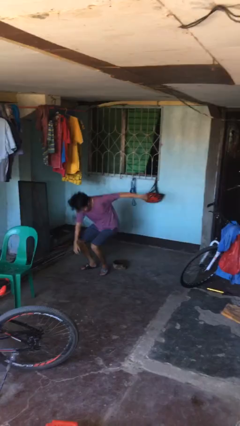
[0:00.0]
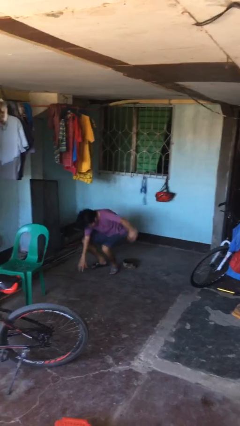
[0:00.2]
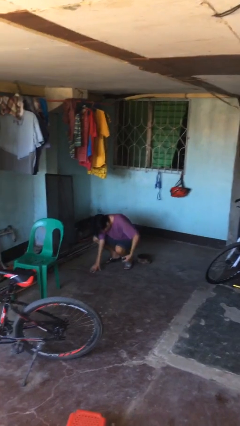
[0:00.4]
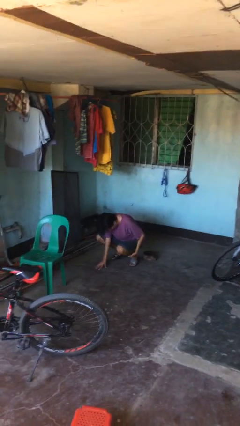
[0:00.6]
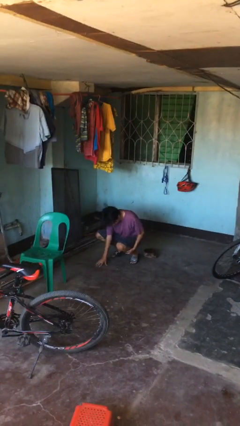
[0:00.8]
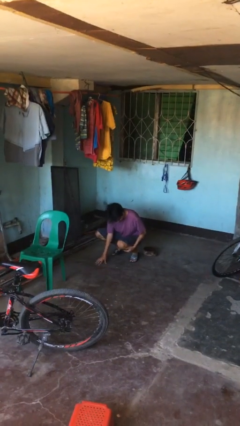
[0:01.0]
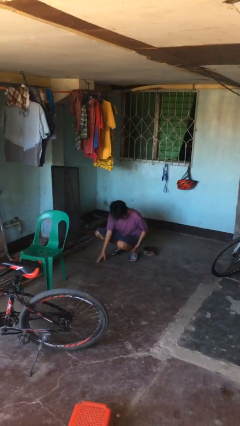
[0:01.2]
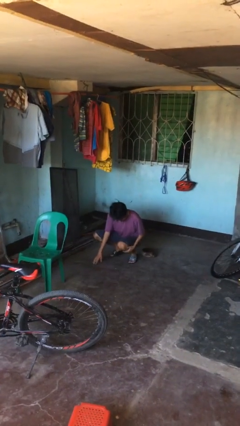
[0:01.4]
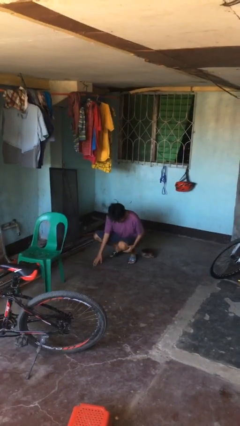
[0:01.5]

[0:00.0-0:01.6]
person lies down on floor

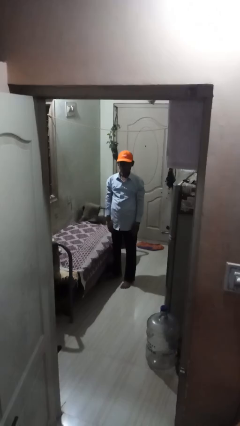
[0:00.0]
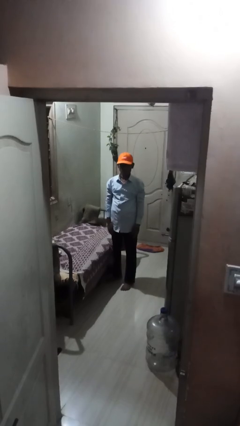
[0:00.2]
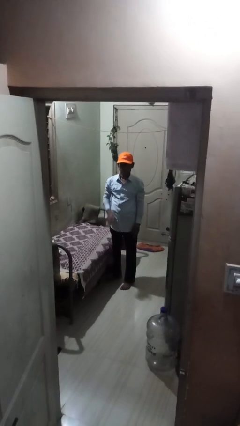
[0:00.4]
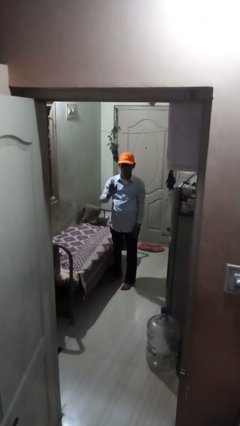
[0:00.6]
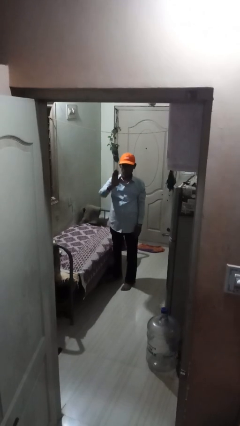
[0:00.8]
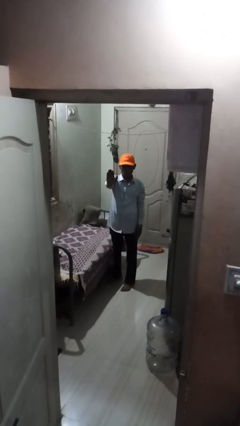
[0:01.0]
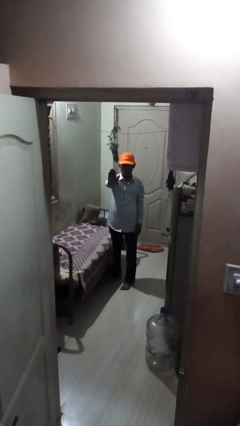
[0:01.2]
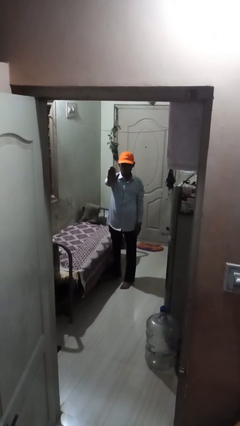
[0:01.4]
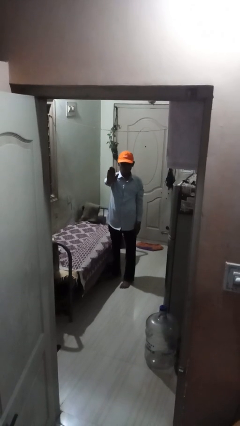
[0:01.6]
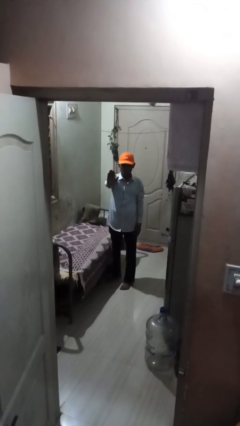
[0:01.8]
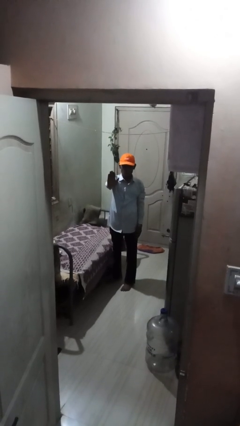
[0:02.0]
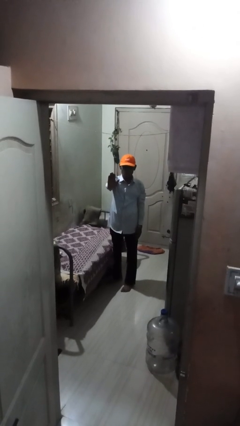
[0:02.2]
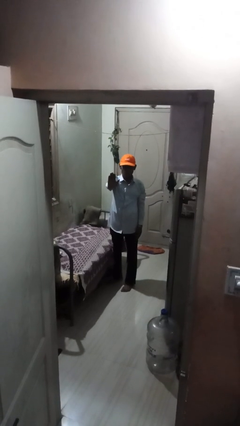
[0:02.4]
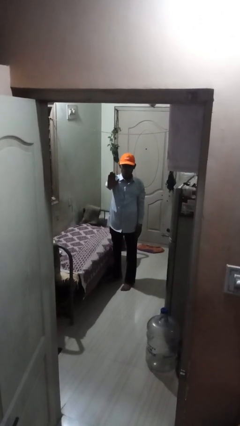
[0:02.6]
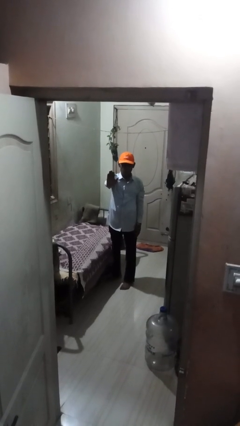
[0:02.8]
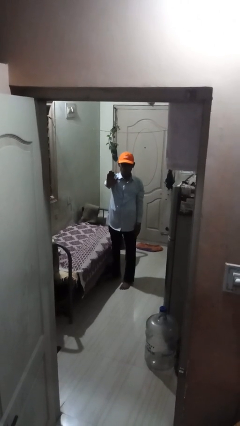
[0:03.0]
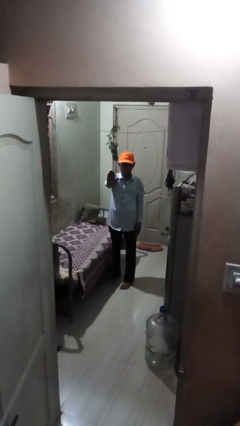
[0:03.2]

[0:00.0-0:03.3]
person gestures stop

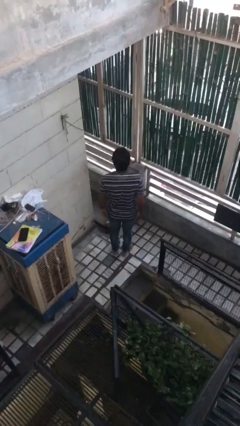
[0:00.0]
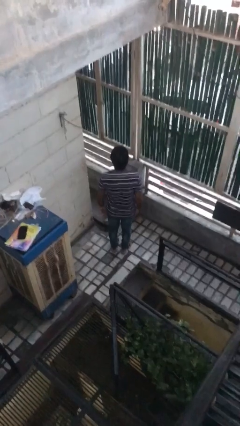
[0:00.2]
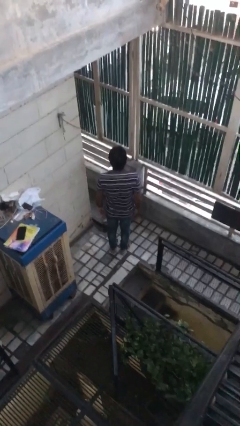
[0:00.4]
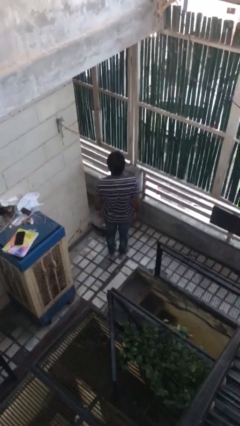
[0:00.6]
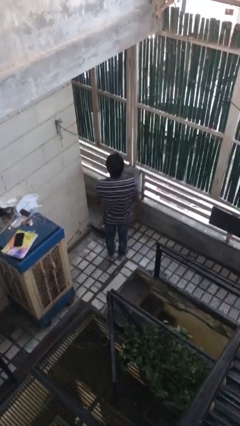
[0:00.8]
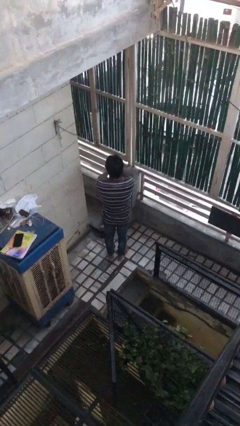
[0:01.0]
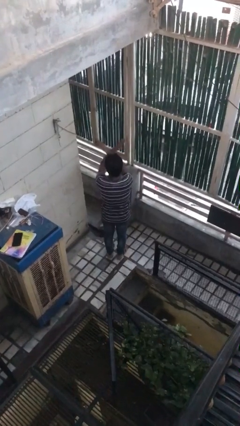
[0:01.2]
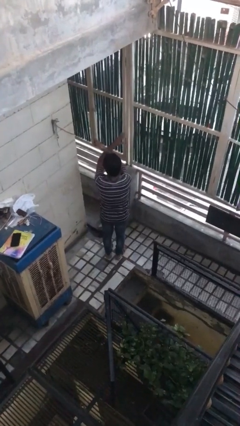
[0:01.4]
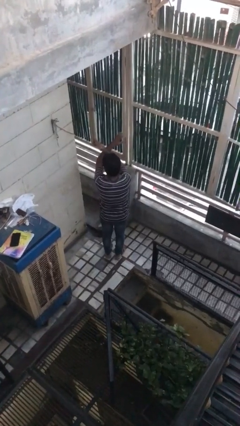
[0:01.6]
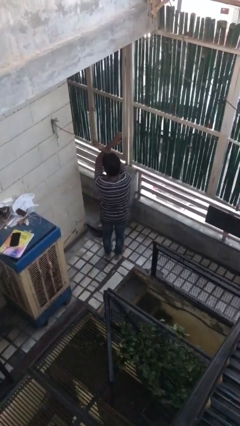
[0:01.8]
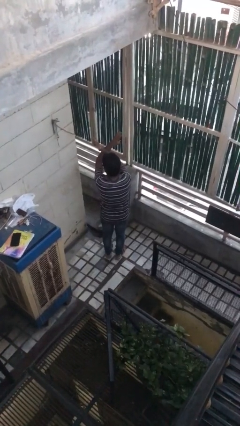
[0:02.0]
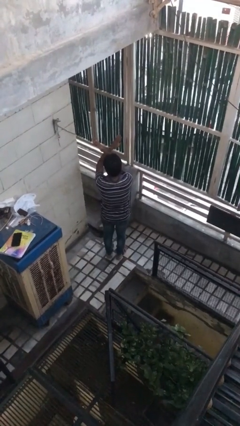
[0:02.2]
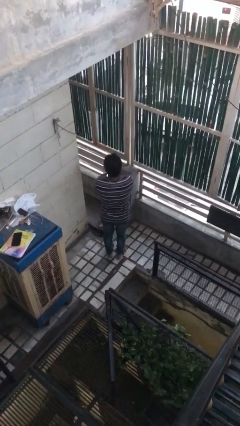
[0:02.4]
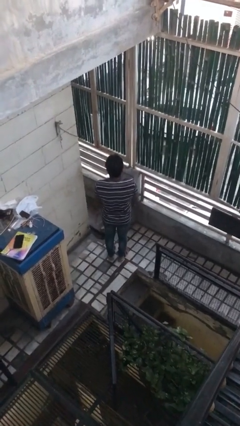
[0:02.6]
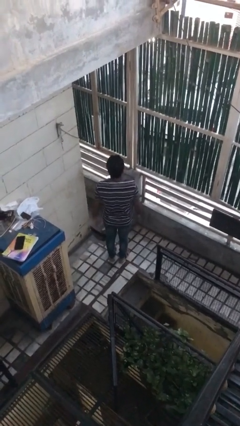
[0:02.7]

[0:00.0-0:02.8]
person gestures arms x

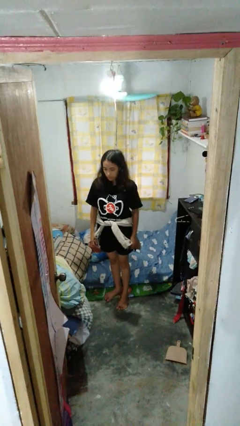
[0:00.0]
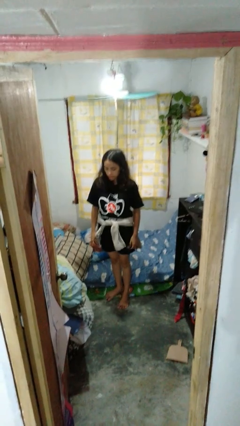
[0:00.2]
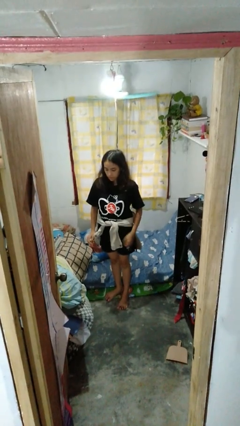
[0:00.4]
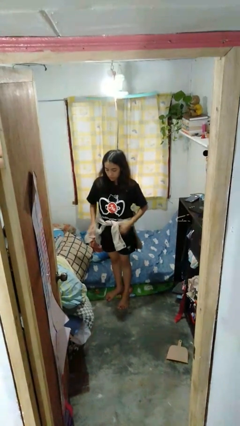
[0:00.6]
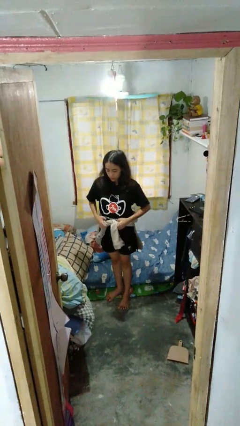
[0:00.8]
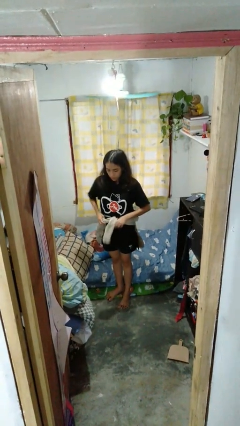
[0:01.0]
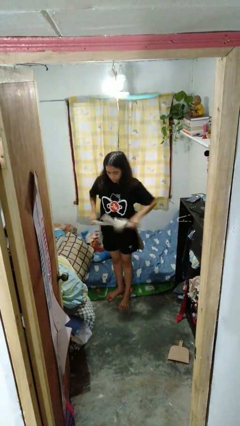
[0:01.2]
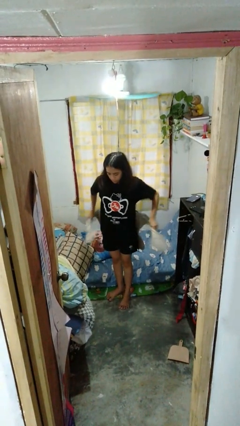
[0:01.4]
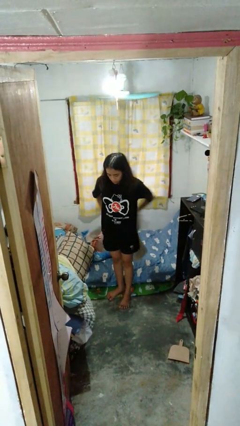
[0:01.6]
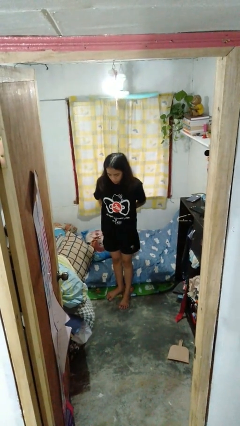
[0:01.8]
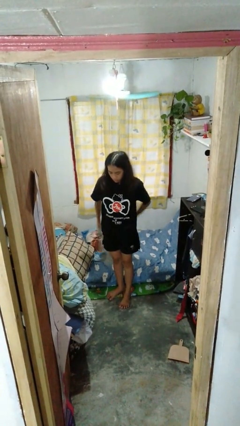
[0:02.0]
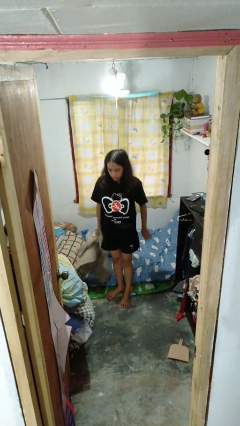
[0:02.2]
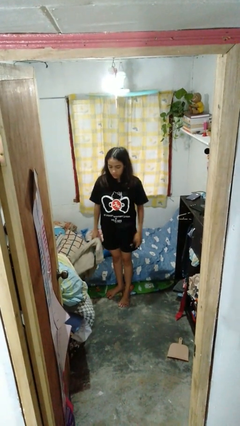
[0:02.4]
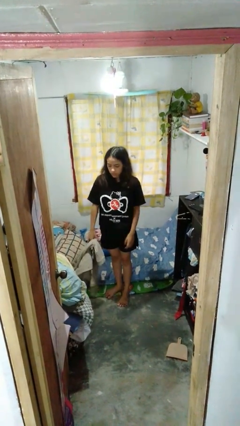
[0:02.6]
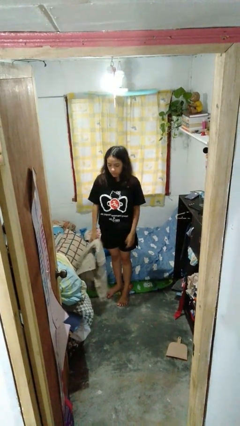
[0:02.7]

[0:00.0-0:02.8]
person unties jacket around waist

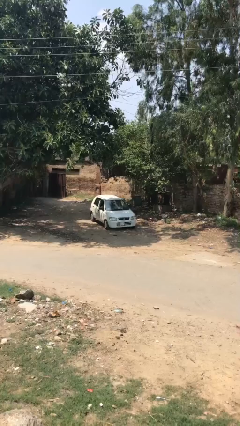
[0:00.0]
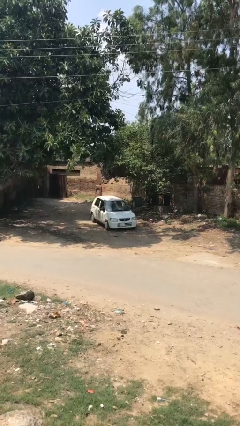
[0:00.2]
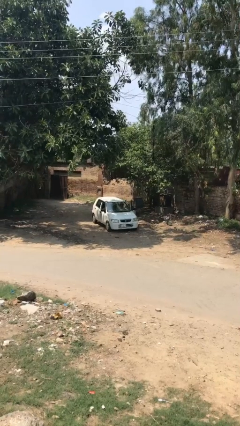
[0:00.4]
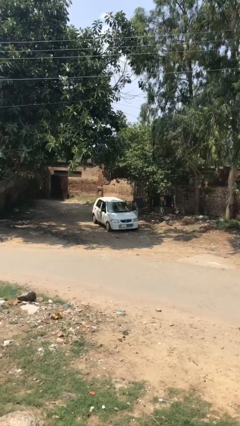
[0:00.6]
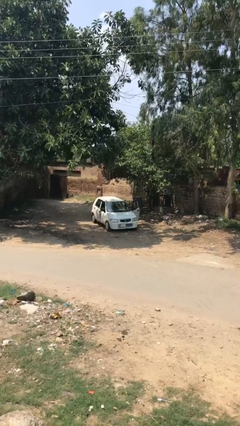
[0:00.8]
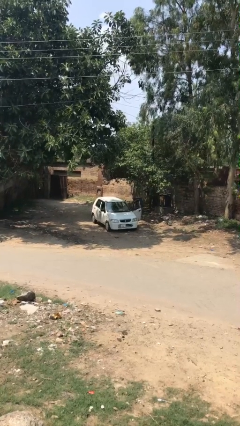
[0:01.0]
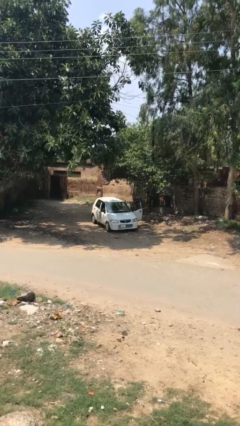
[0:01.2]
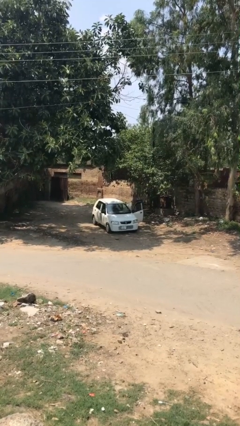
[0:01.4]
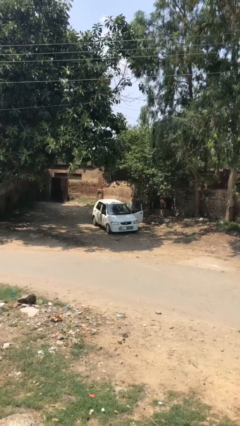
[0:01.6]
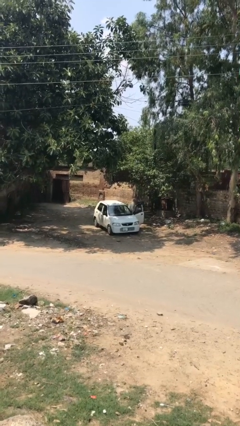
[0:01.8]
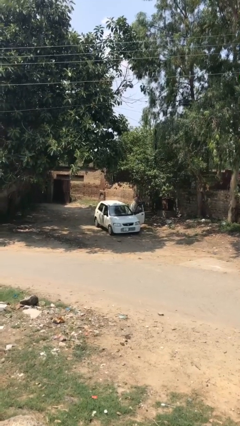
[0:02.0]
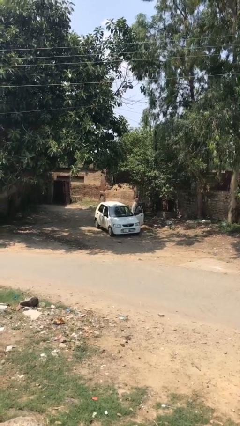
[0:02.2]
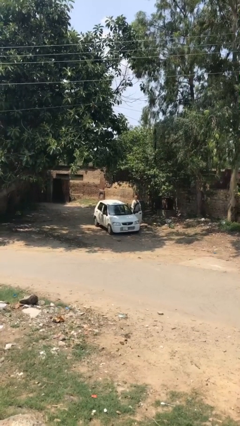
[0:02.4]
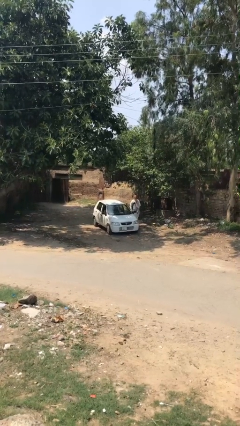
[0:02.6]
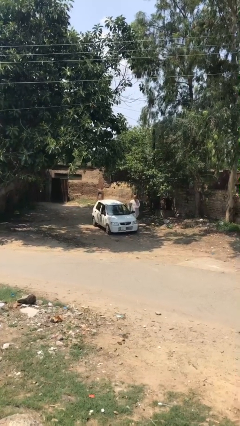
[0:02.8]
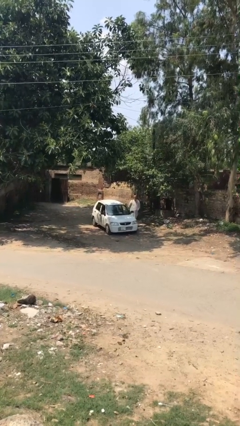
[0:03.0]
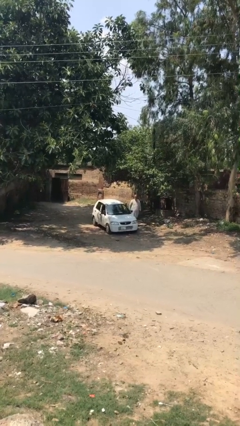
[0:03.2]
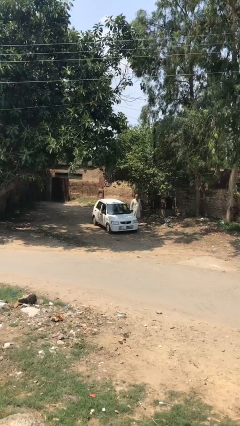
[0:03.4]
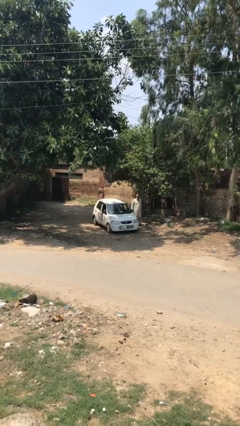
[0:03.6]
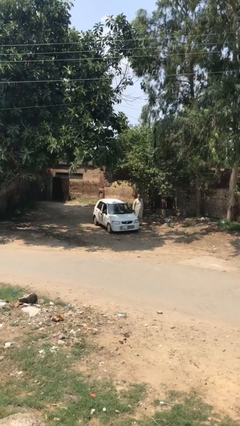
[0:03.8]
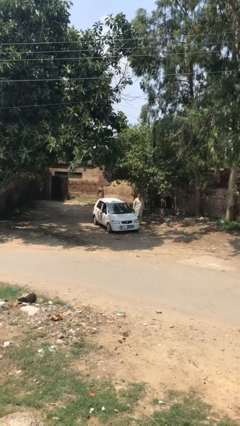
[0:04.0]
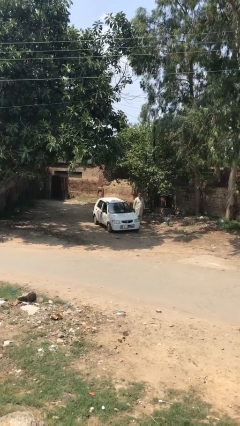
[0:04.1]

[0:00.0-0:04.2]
car drops off person

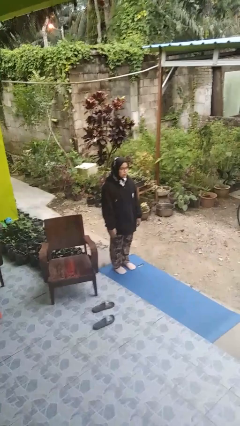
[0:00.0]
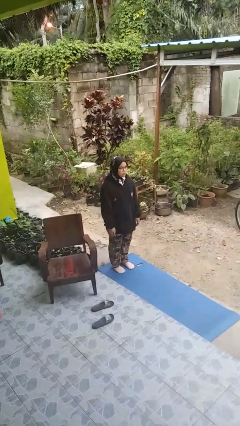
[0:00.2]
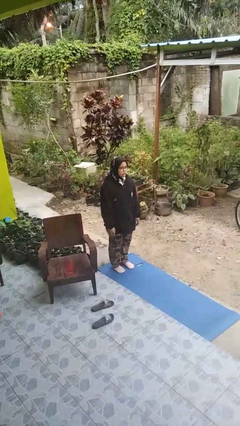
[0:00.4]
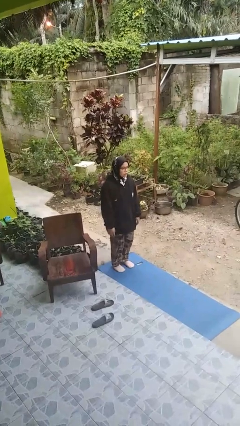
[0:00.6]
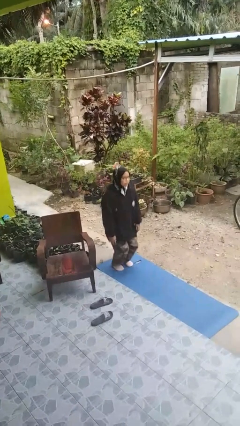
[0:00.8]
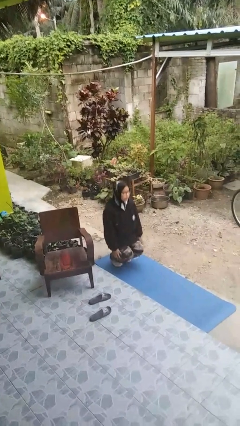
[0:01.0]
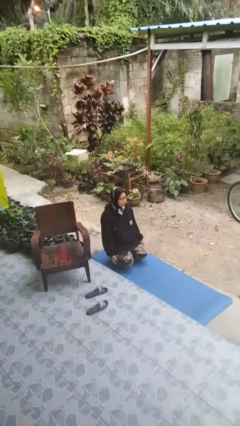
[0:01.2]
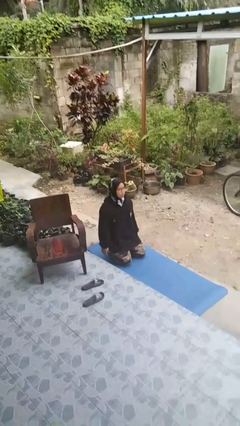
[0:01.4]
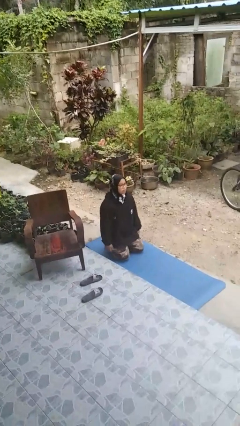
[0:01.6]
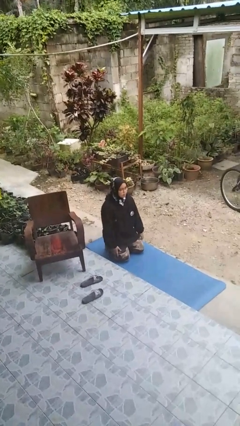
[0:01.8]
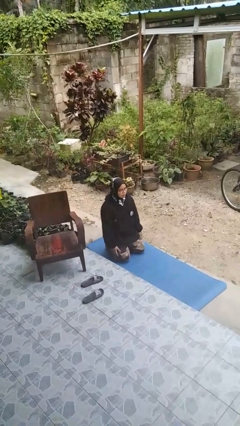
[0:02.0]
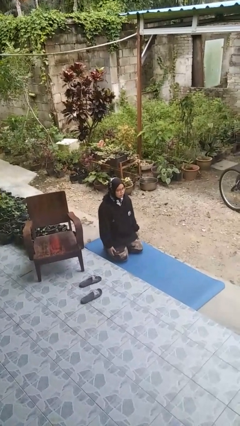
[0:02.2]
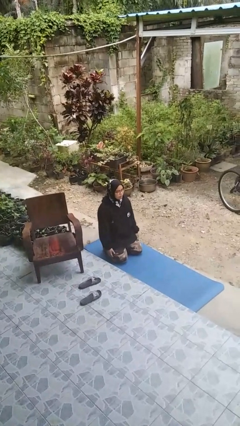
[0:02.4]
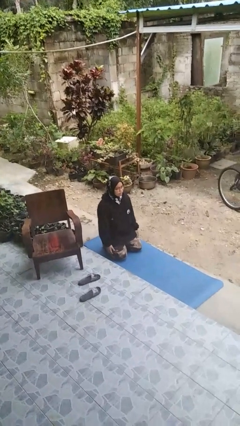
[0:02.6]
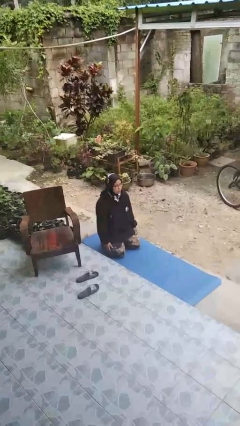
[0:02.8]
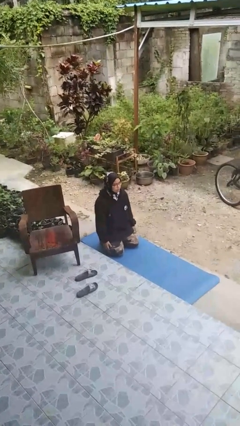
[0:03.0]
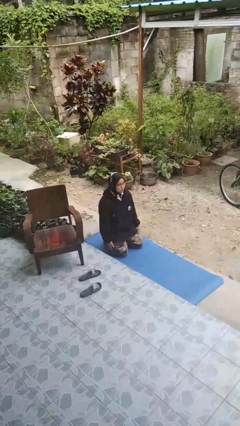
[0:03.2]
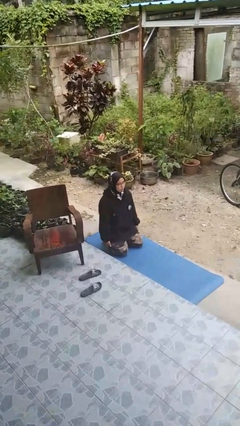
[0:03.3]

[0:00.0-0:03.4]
person kneels
